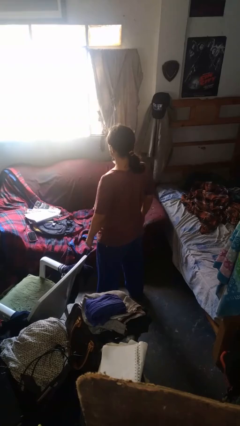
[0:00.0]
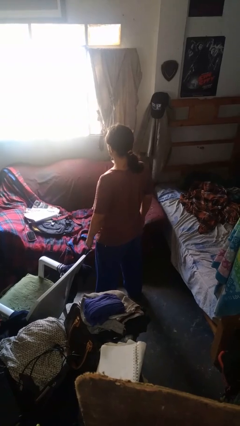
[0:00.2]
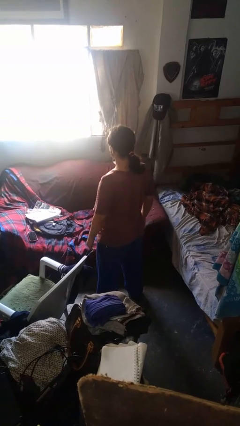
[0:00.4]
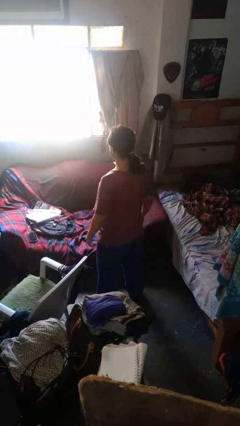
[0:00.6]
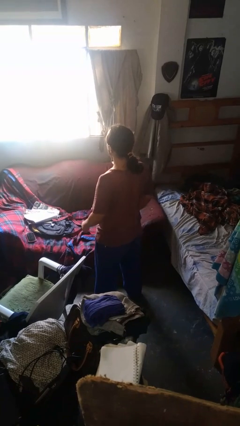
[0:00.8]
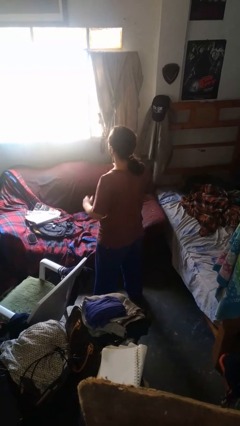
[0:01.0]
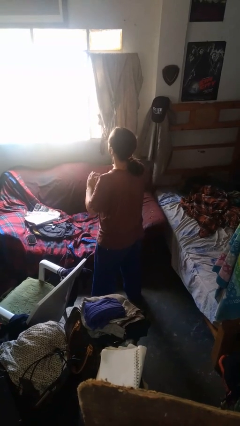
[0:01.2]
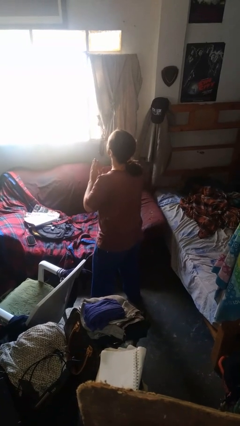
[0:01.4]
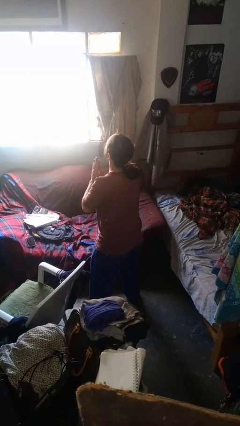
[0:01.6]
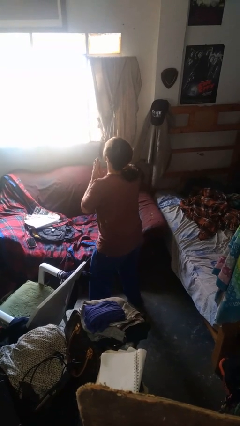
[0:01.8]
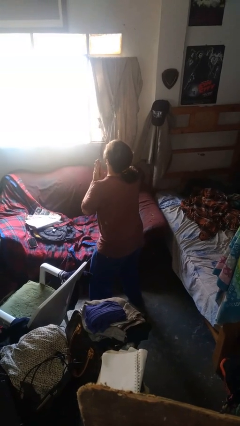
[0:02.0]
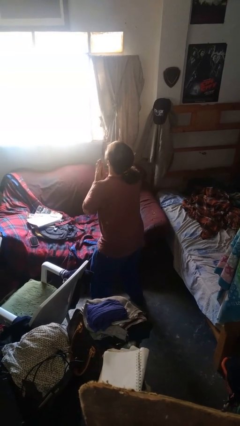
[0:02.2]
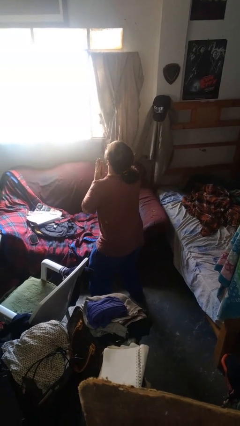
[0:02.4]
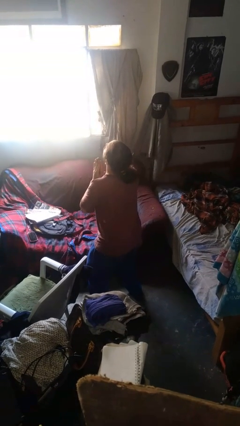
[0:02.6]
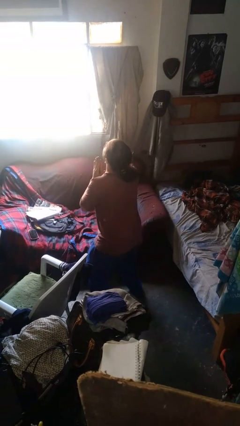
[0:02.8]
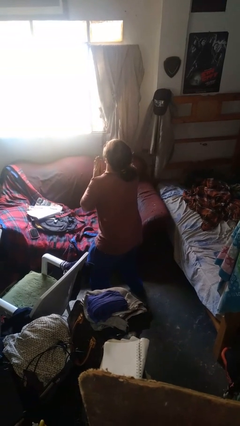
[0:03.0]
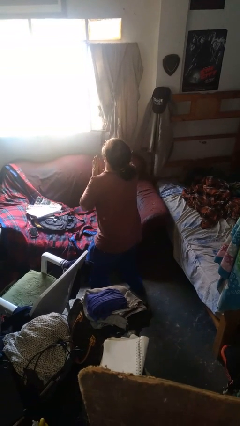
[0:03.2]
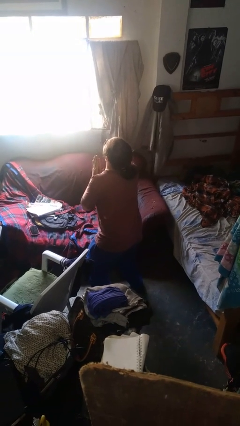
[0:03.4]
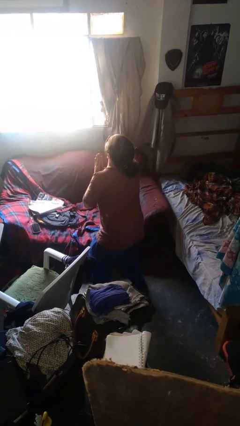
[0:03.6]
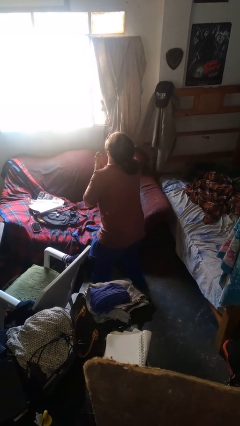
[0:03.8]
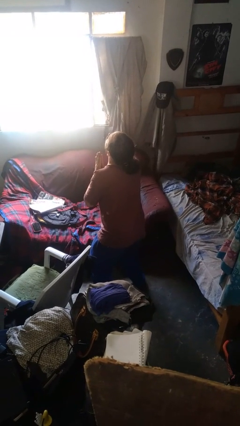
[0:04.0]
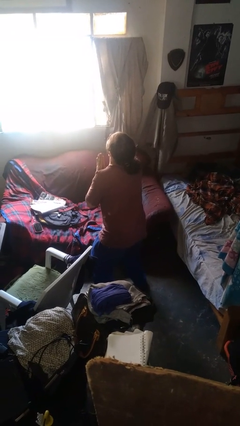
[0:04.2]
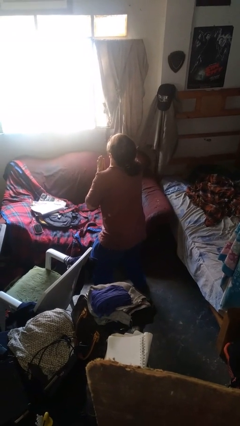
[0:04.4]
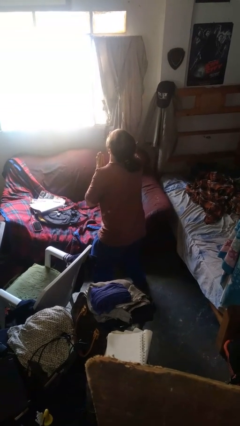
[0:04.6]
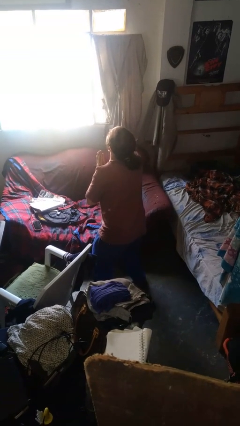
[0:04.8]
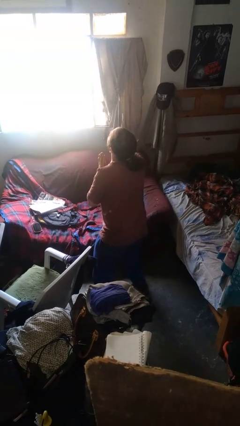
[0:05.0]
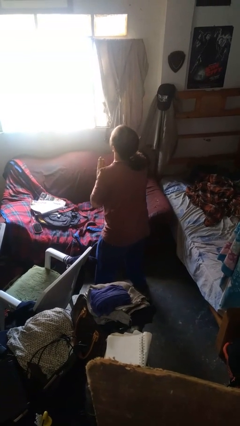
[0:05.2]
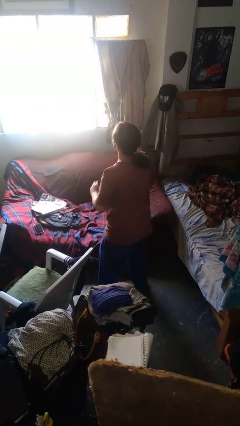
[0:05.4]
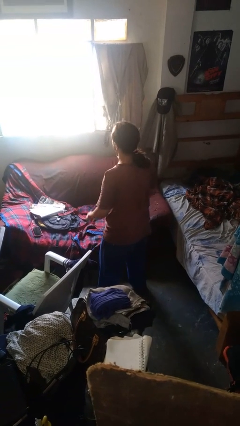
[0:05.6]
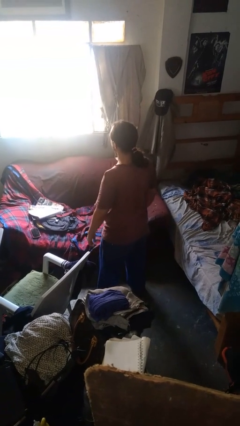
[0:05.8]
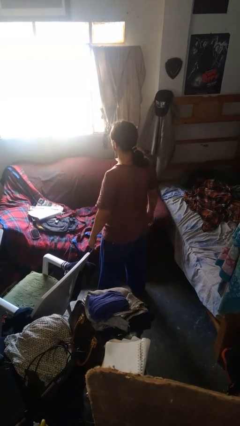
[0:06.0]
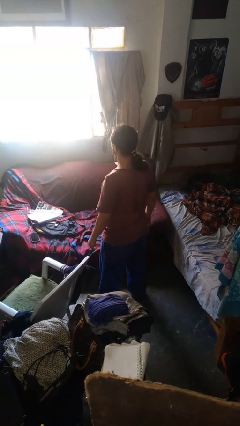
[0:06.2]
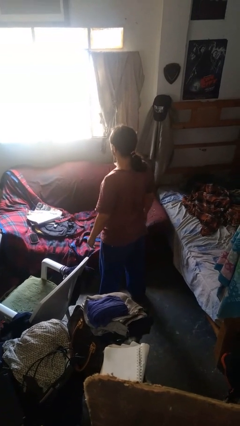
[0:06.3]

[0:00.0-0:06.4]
person prays

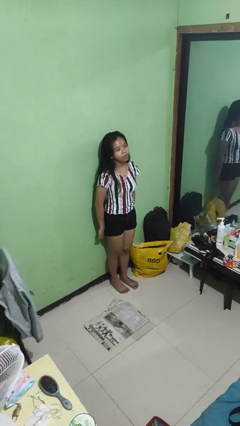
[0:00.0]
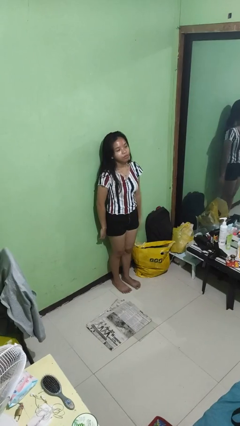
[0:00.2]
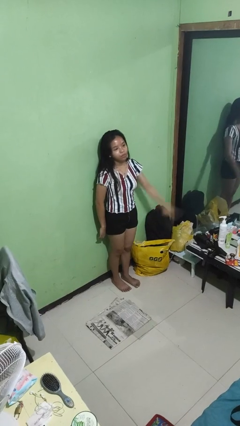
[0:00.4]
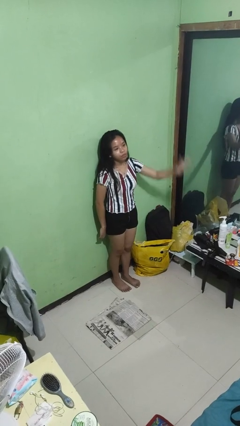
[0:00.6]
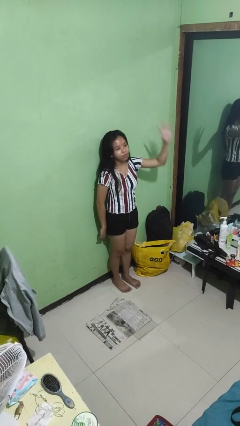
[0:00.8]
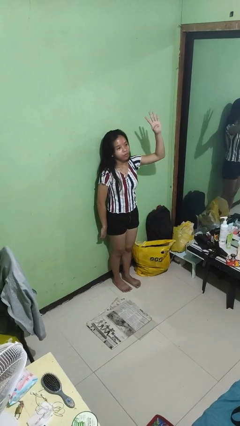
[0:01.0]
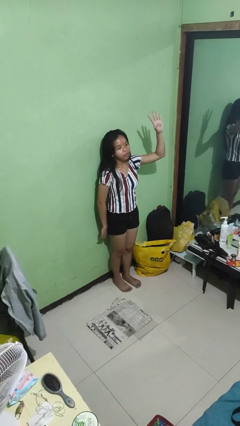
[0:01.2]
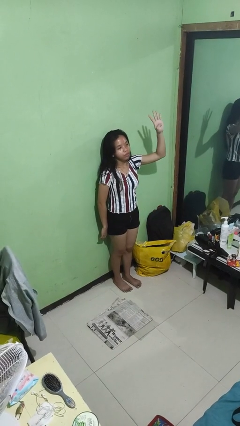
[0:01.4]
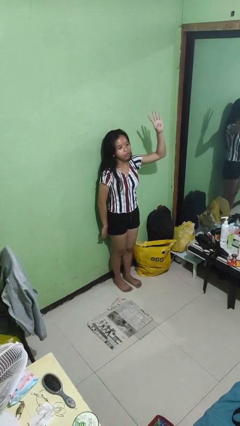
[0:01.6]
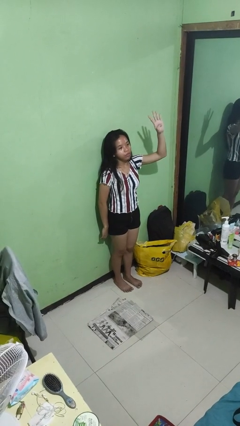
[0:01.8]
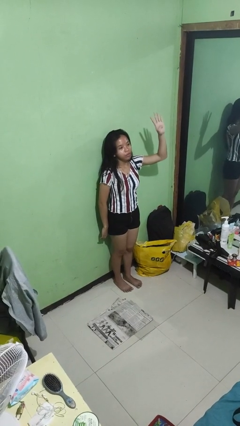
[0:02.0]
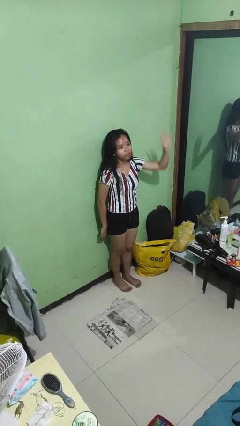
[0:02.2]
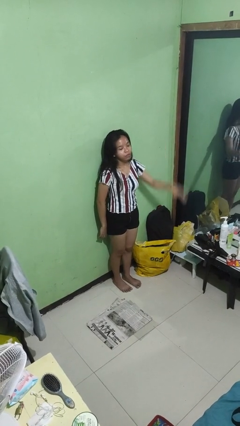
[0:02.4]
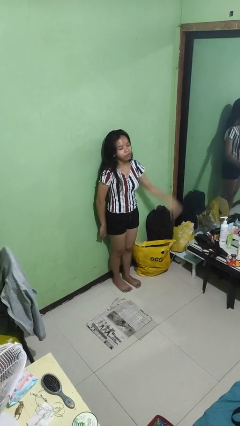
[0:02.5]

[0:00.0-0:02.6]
person gestures number four

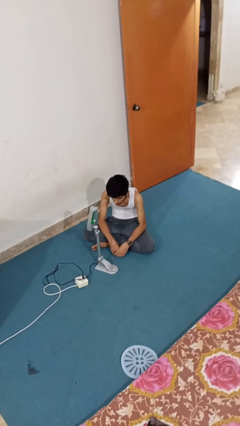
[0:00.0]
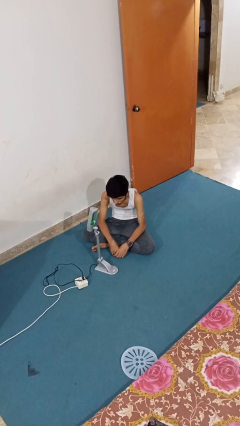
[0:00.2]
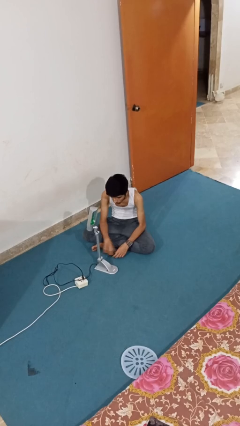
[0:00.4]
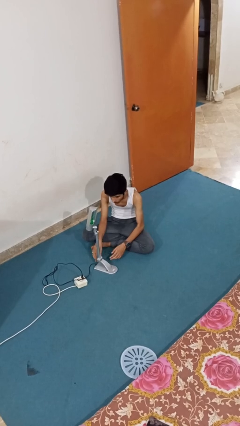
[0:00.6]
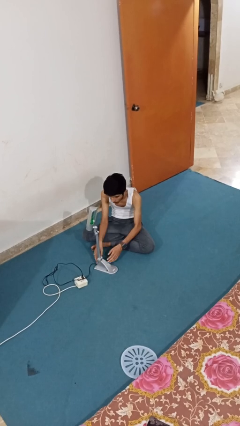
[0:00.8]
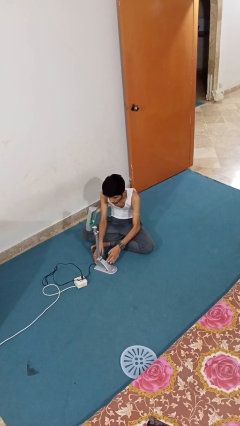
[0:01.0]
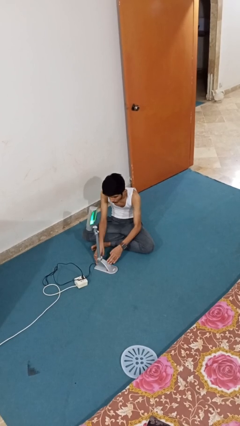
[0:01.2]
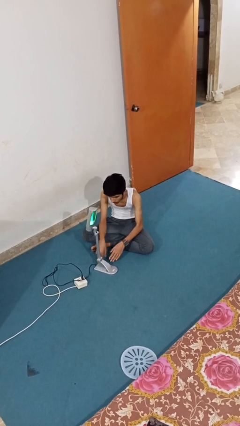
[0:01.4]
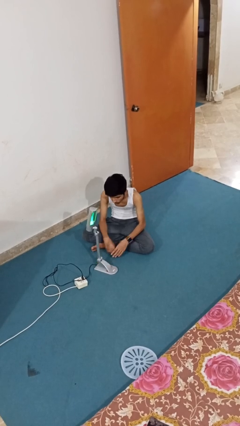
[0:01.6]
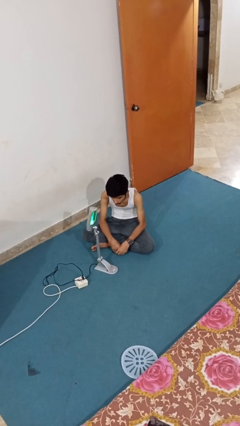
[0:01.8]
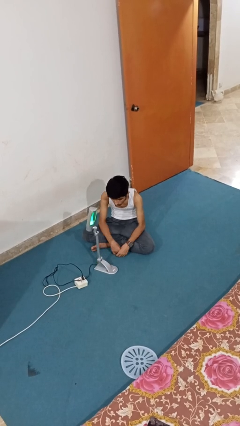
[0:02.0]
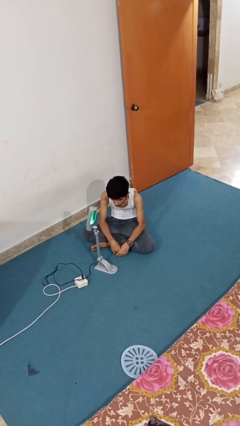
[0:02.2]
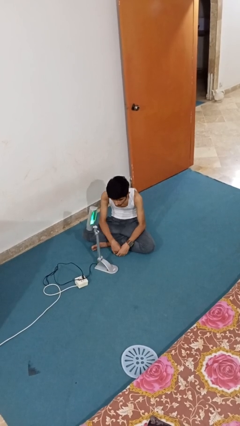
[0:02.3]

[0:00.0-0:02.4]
person turns on lamp

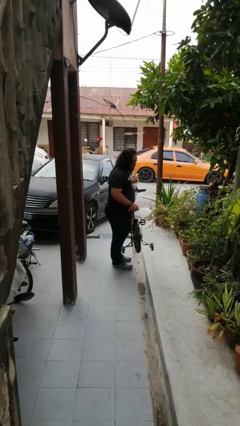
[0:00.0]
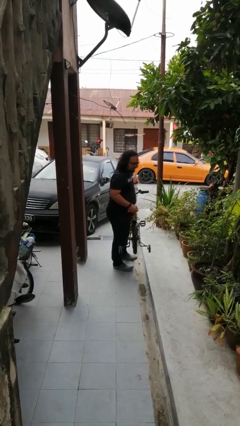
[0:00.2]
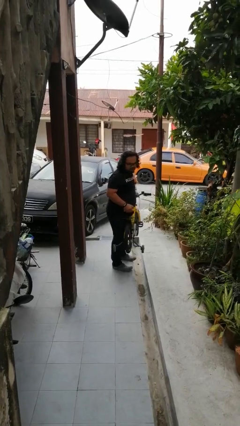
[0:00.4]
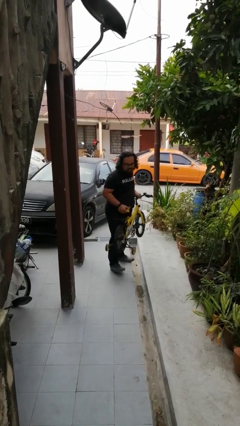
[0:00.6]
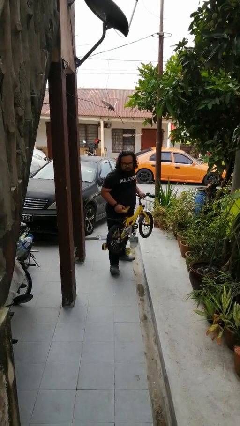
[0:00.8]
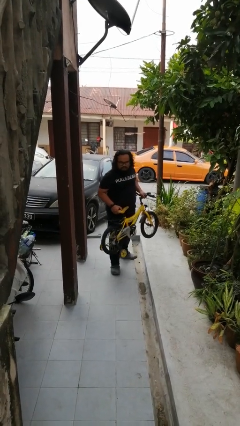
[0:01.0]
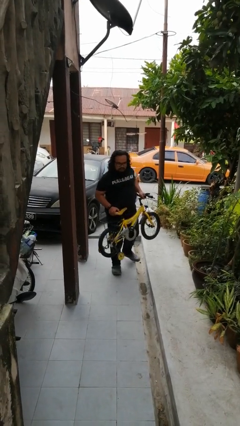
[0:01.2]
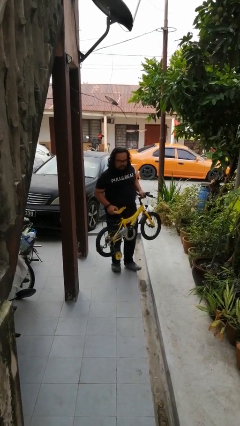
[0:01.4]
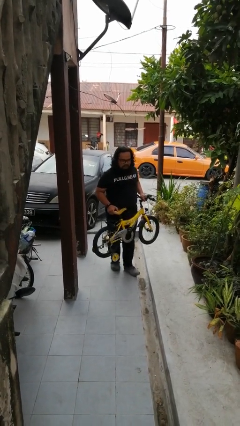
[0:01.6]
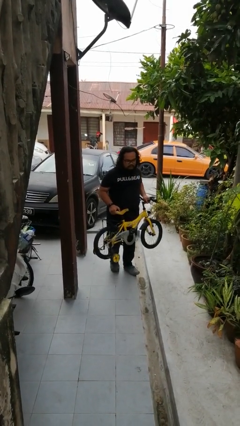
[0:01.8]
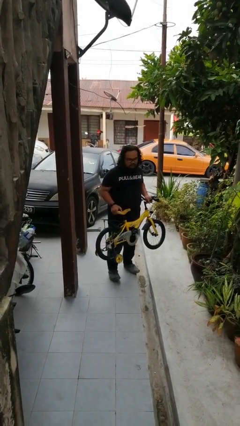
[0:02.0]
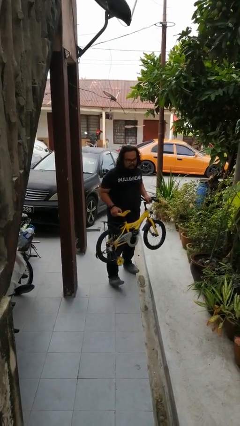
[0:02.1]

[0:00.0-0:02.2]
person carries bicycle

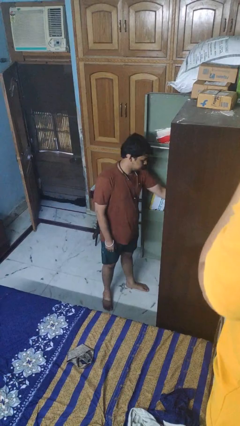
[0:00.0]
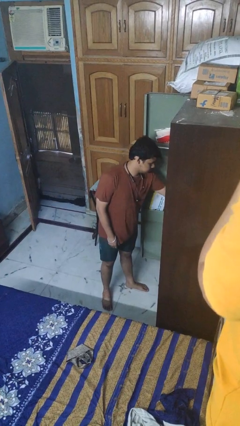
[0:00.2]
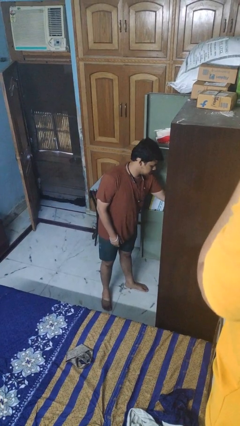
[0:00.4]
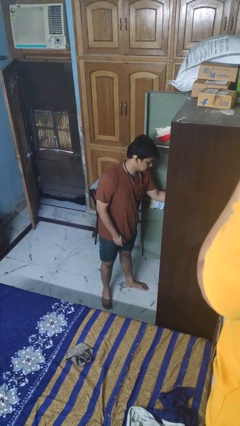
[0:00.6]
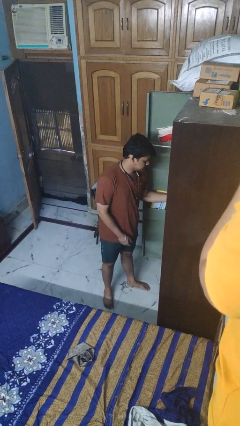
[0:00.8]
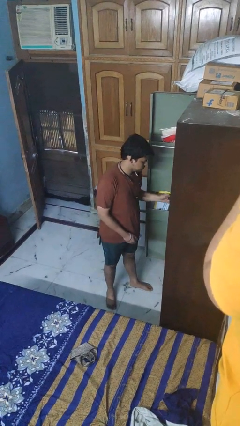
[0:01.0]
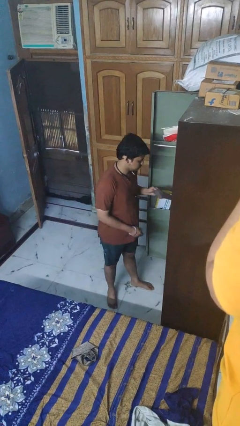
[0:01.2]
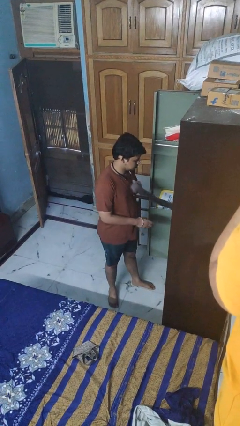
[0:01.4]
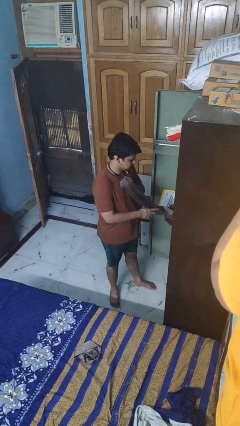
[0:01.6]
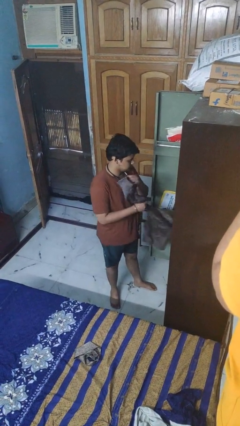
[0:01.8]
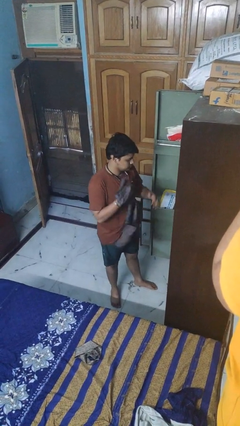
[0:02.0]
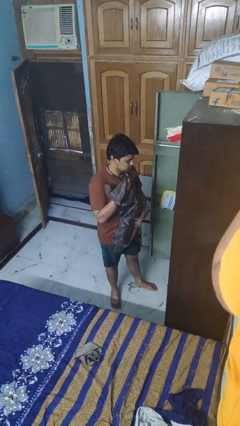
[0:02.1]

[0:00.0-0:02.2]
person takes clothes from dresser

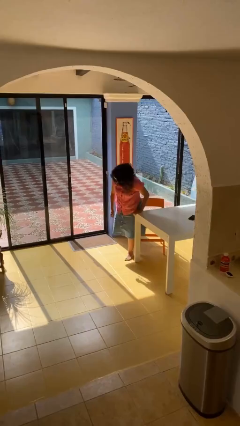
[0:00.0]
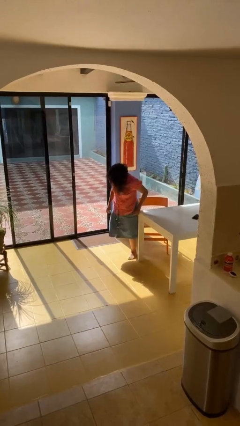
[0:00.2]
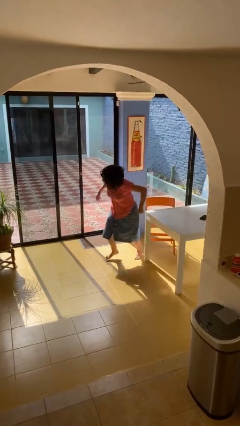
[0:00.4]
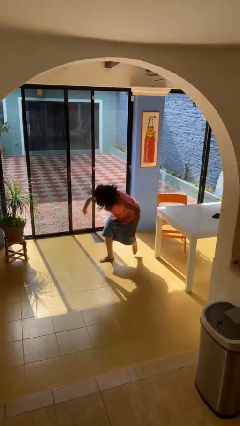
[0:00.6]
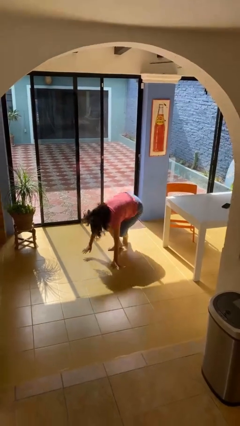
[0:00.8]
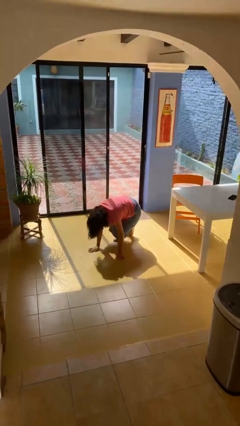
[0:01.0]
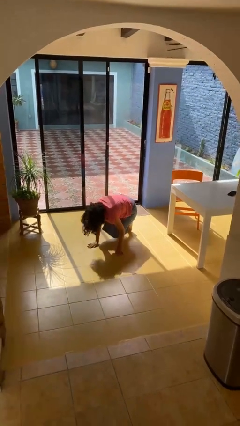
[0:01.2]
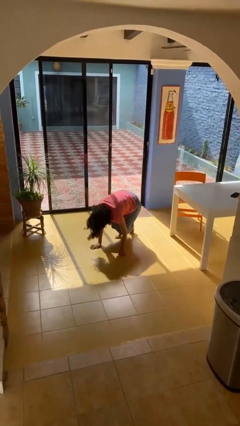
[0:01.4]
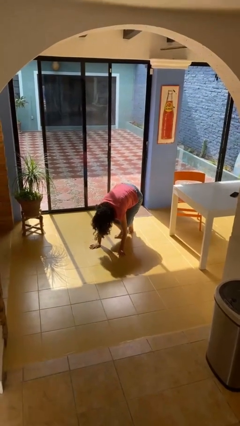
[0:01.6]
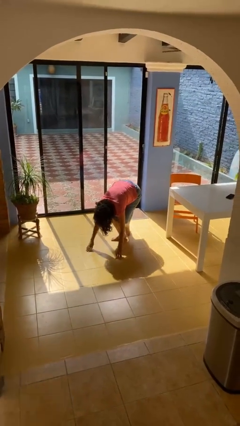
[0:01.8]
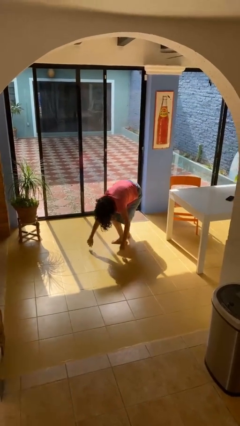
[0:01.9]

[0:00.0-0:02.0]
person falls from chair
